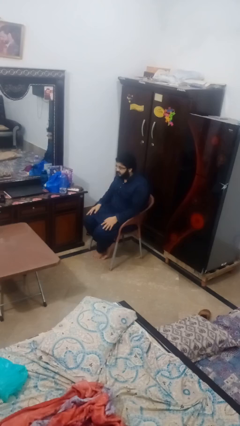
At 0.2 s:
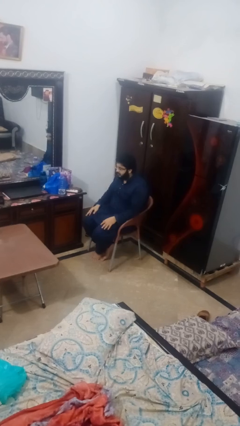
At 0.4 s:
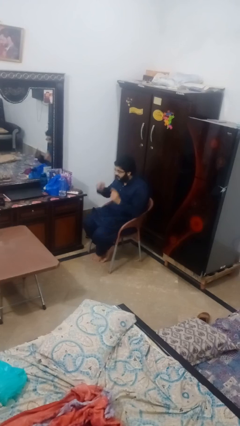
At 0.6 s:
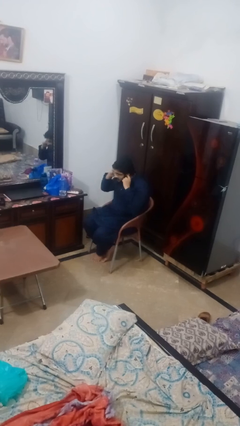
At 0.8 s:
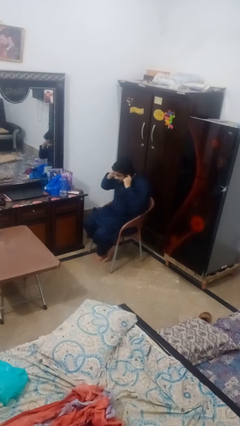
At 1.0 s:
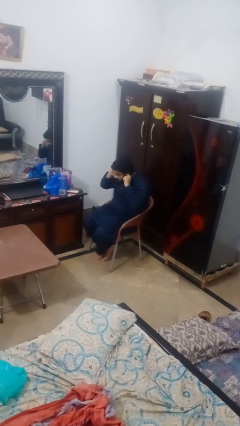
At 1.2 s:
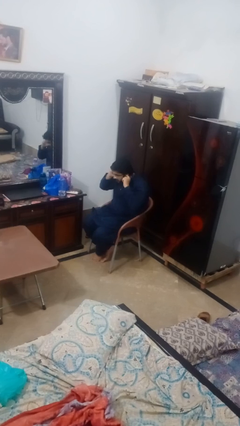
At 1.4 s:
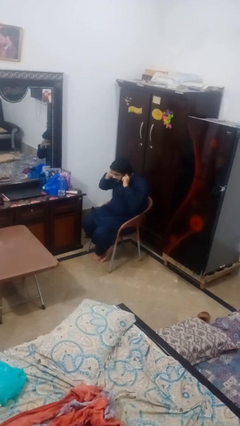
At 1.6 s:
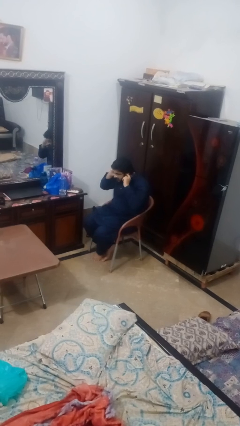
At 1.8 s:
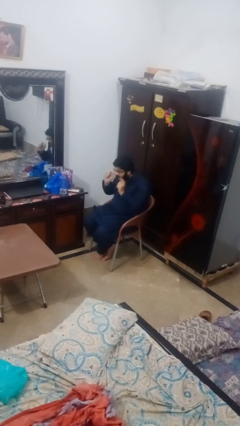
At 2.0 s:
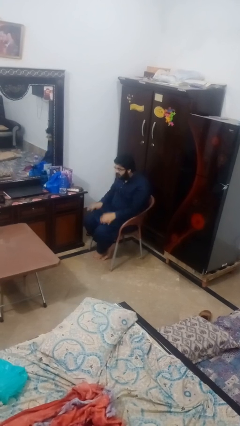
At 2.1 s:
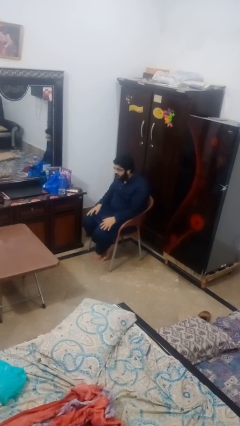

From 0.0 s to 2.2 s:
person puts fingers in ear

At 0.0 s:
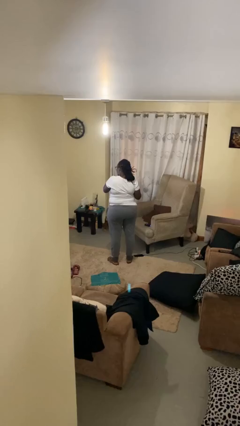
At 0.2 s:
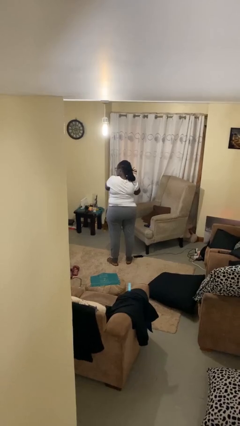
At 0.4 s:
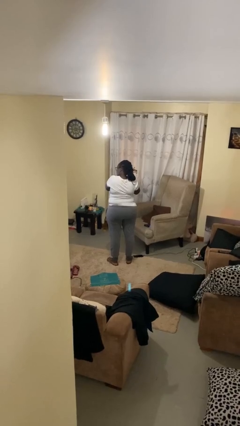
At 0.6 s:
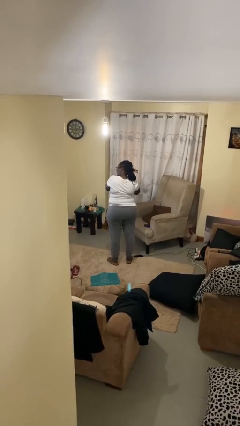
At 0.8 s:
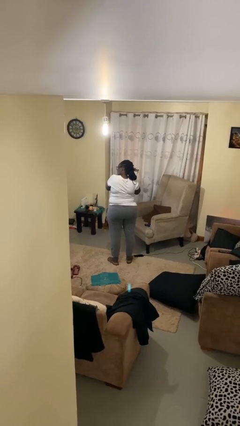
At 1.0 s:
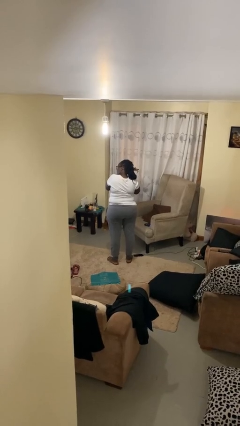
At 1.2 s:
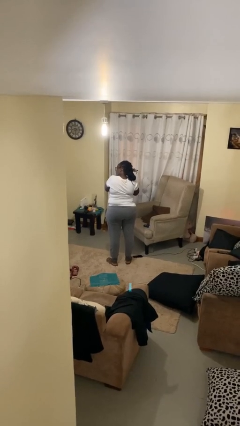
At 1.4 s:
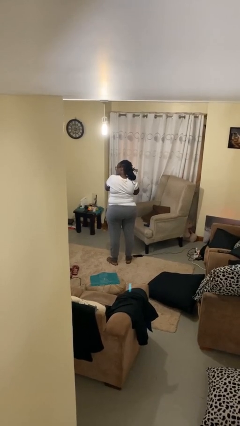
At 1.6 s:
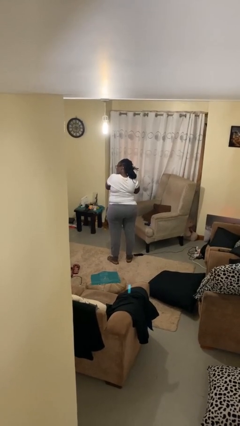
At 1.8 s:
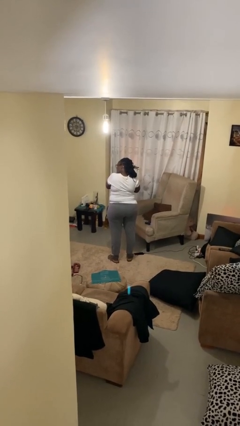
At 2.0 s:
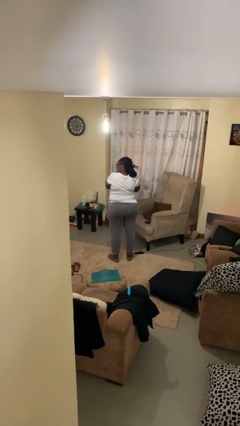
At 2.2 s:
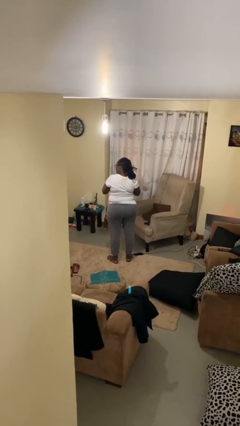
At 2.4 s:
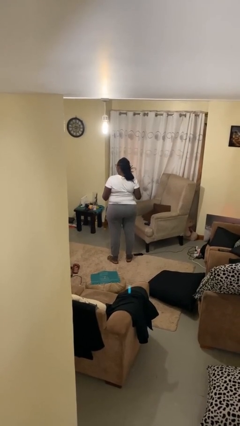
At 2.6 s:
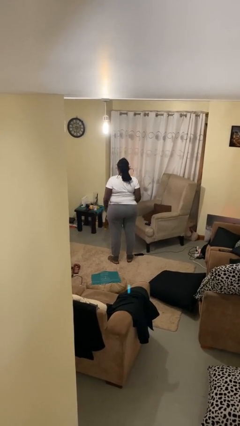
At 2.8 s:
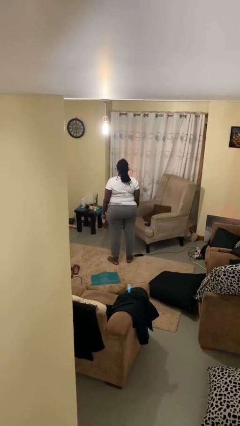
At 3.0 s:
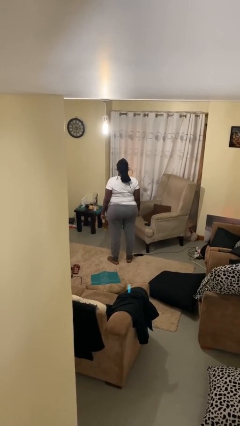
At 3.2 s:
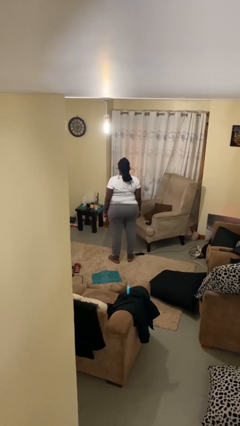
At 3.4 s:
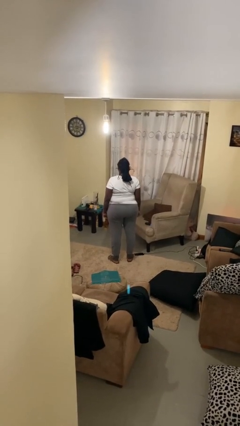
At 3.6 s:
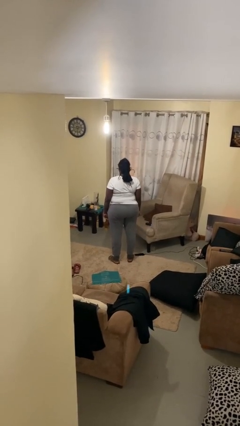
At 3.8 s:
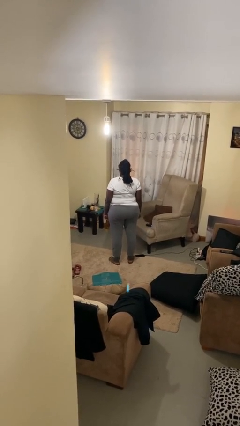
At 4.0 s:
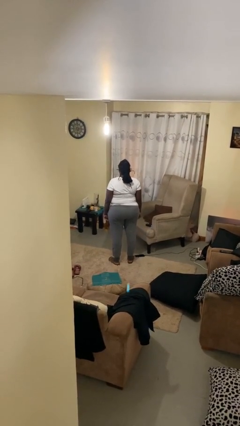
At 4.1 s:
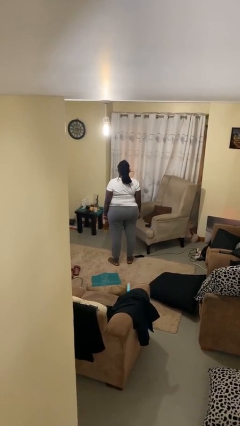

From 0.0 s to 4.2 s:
person takes off earrings

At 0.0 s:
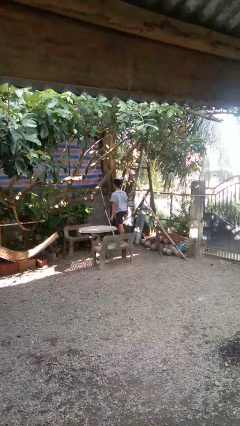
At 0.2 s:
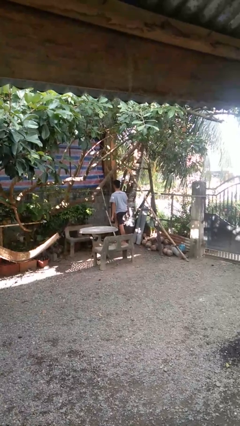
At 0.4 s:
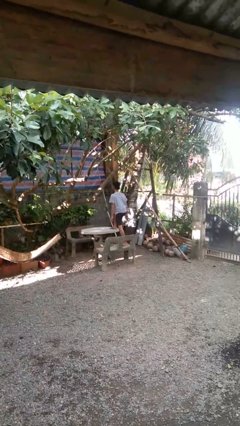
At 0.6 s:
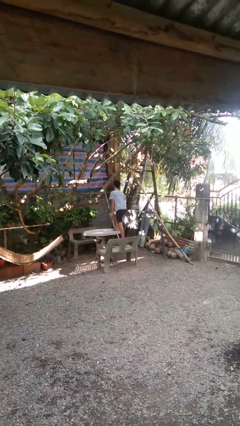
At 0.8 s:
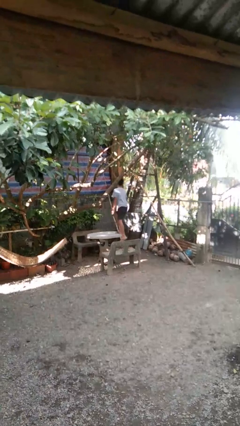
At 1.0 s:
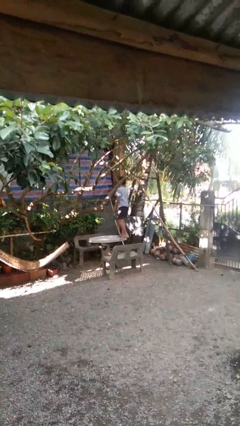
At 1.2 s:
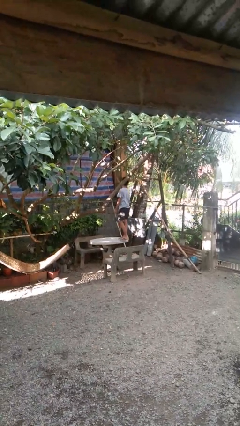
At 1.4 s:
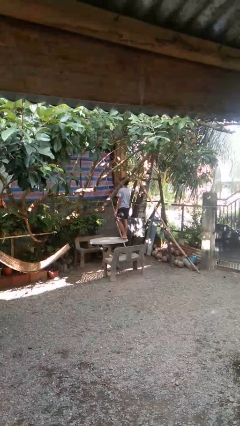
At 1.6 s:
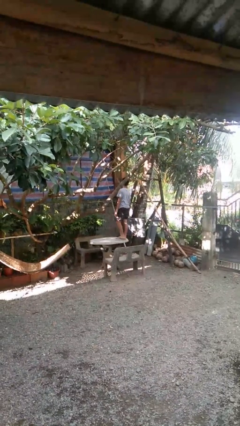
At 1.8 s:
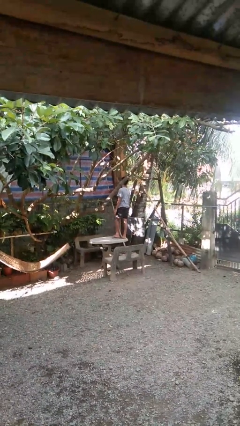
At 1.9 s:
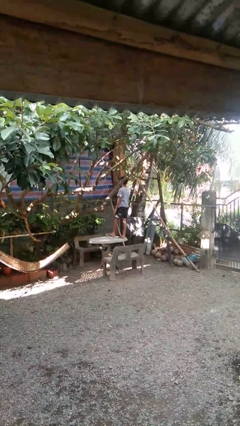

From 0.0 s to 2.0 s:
person climbs on table

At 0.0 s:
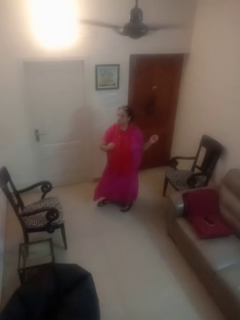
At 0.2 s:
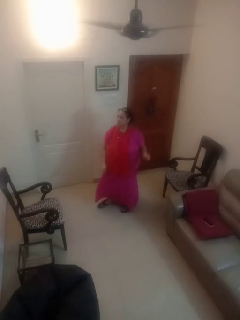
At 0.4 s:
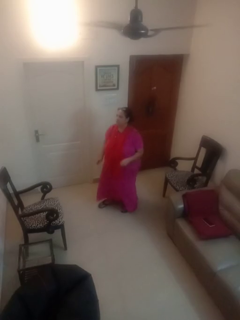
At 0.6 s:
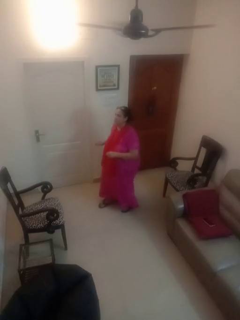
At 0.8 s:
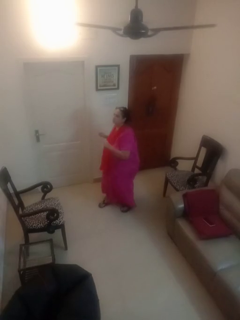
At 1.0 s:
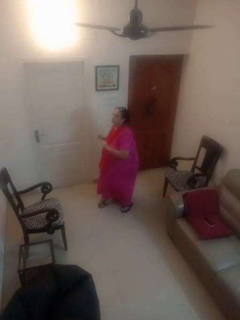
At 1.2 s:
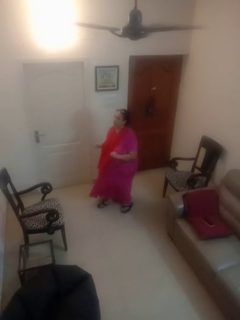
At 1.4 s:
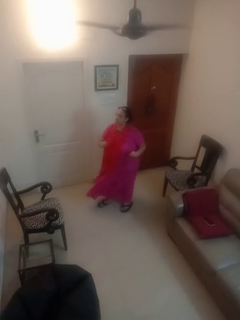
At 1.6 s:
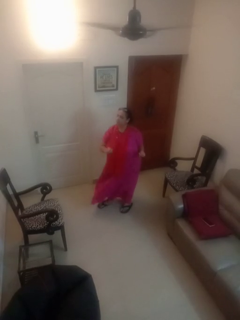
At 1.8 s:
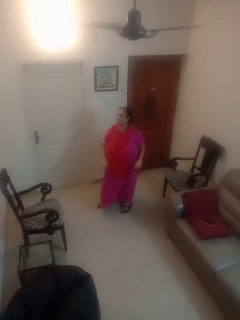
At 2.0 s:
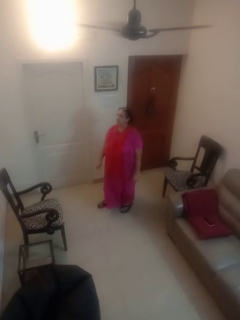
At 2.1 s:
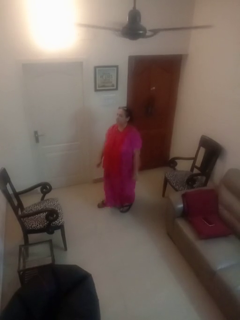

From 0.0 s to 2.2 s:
person dances in place

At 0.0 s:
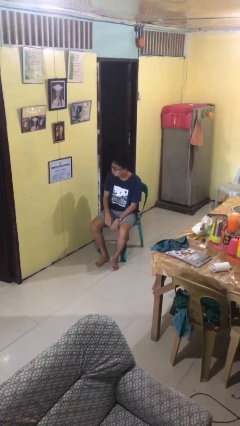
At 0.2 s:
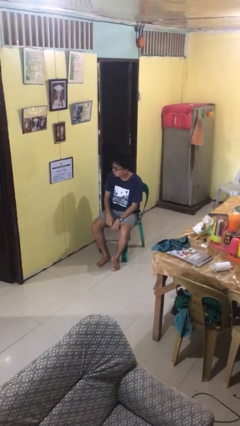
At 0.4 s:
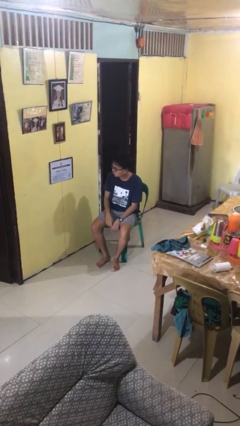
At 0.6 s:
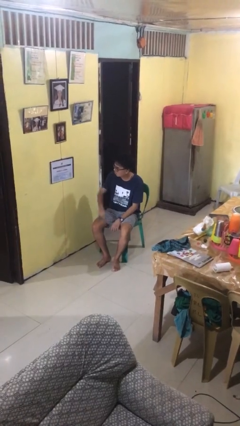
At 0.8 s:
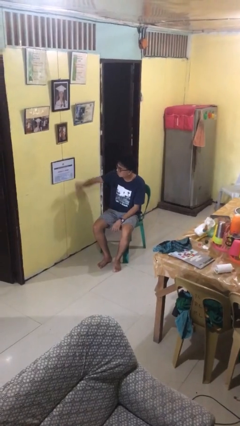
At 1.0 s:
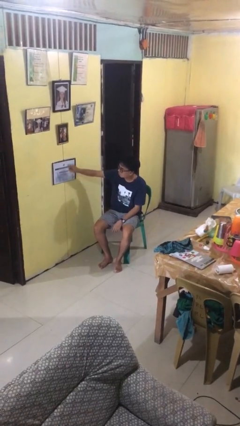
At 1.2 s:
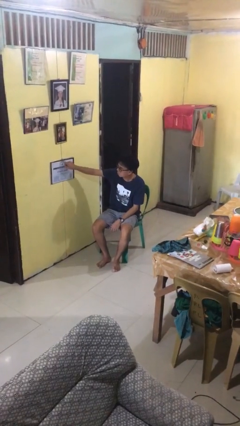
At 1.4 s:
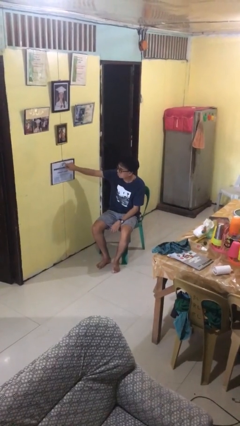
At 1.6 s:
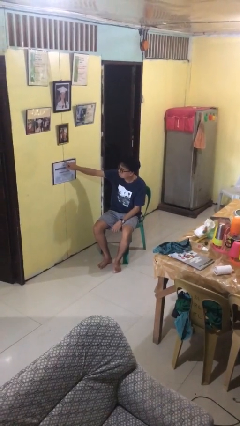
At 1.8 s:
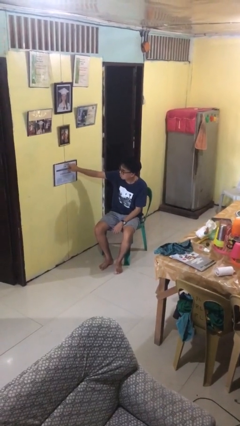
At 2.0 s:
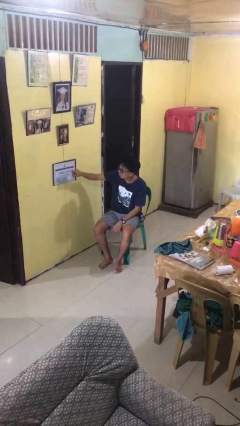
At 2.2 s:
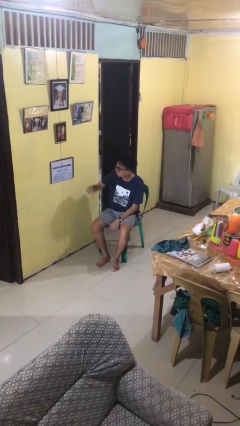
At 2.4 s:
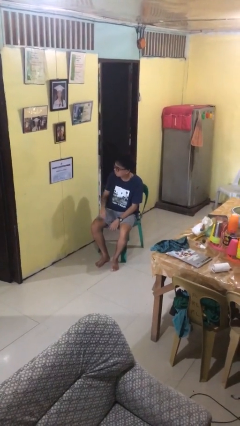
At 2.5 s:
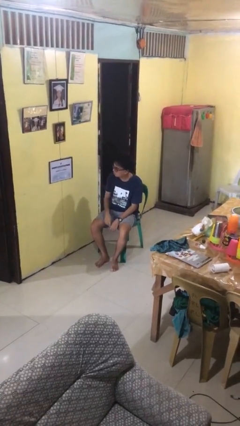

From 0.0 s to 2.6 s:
person taps object with finger

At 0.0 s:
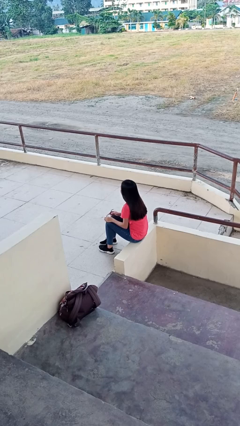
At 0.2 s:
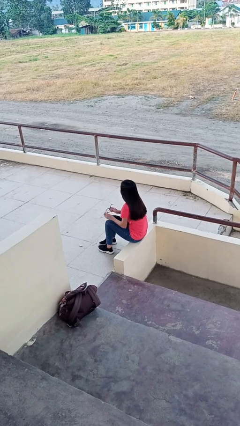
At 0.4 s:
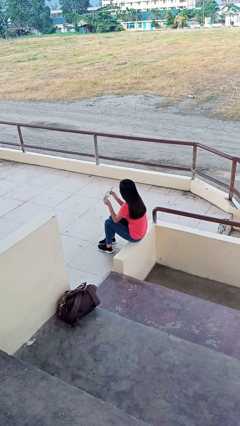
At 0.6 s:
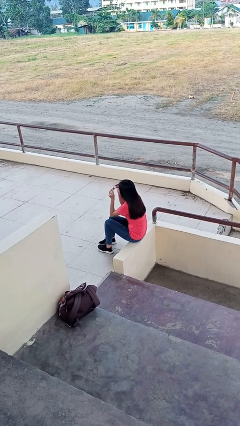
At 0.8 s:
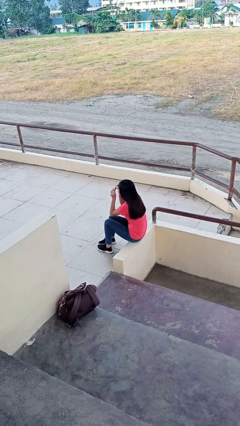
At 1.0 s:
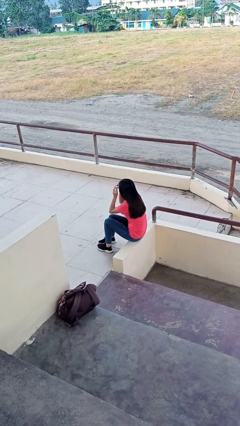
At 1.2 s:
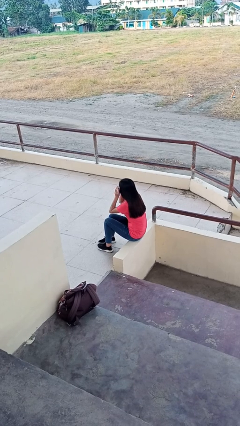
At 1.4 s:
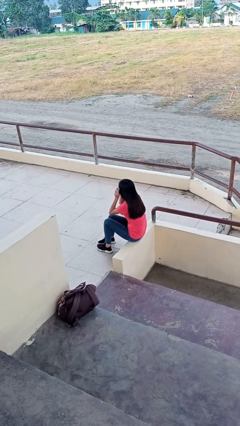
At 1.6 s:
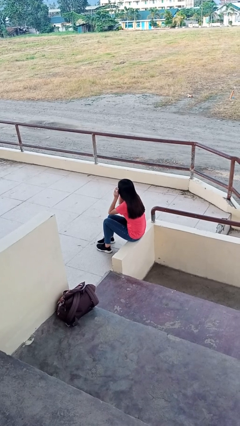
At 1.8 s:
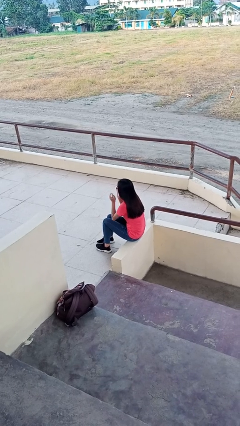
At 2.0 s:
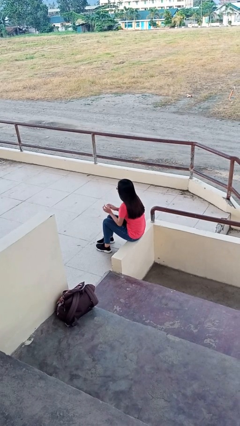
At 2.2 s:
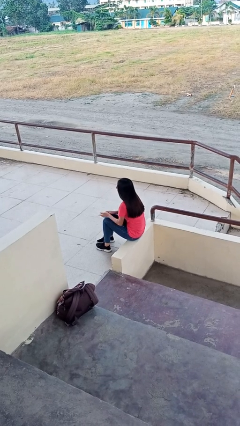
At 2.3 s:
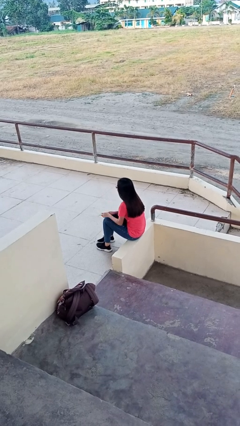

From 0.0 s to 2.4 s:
person puts on glasses

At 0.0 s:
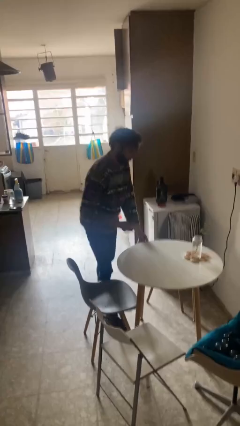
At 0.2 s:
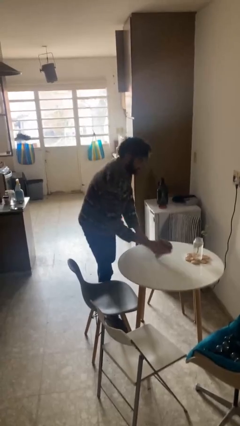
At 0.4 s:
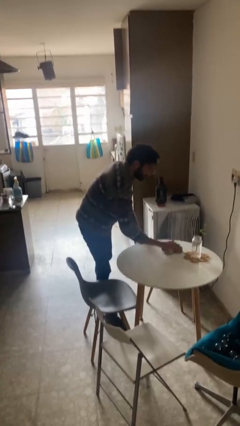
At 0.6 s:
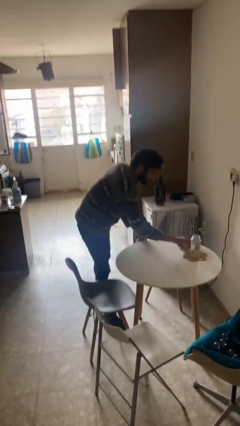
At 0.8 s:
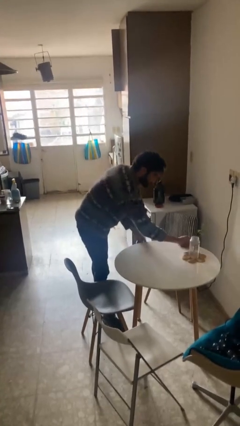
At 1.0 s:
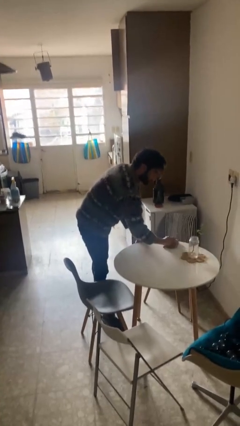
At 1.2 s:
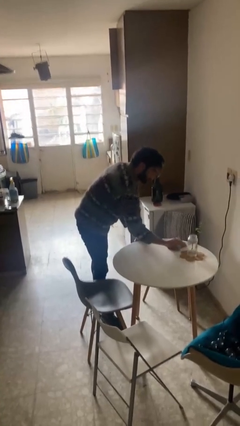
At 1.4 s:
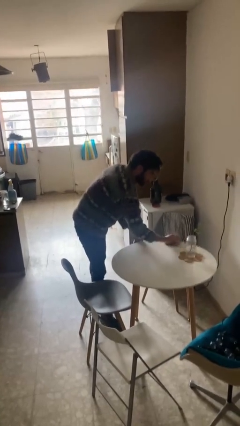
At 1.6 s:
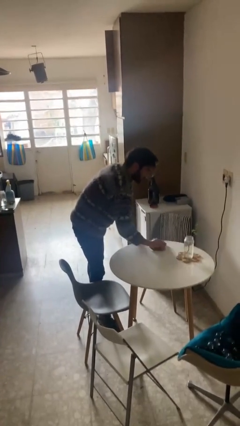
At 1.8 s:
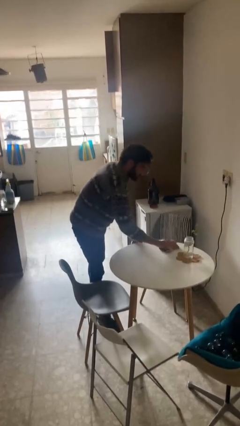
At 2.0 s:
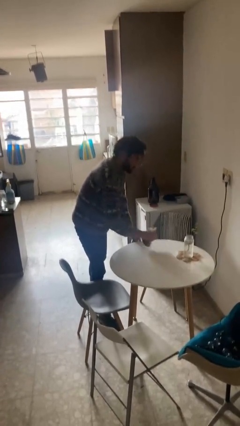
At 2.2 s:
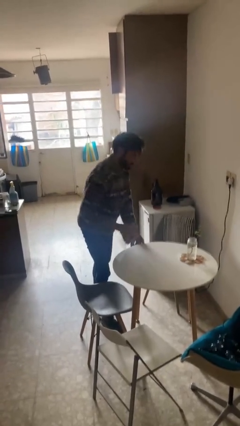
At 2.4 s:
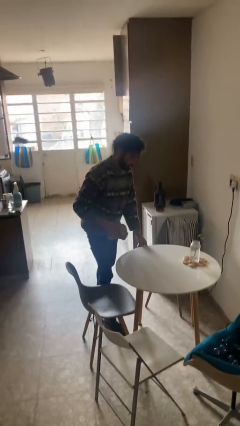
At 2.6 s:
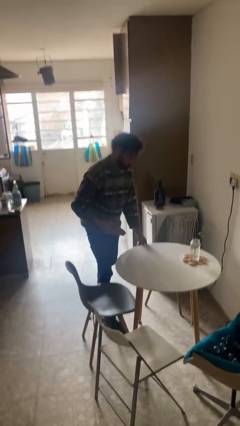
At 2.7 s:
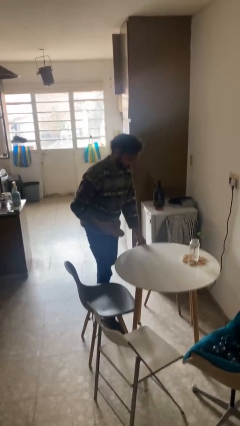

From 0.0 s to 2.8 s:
person cleans table with rag
